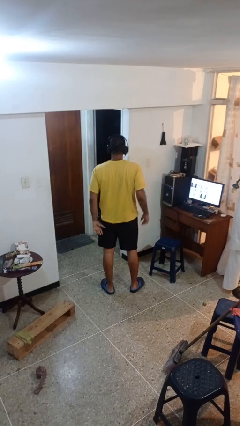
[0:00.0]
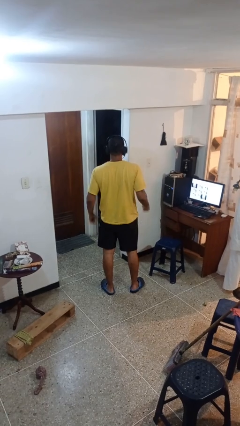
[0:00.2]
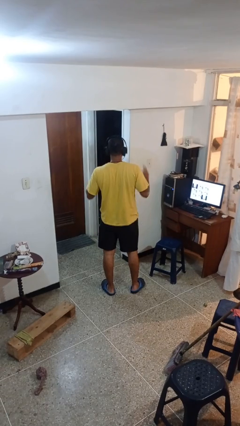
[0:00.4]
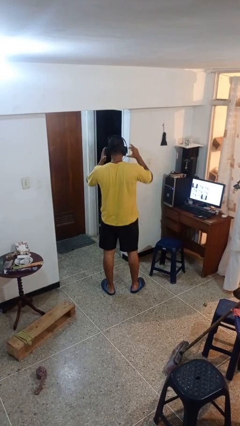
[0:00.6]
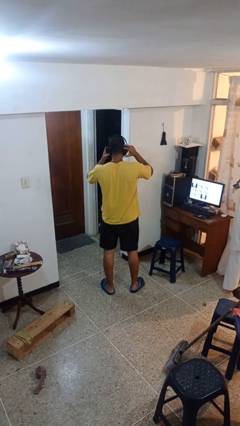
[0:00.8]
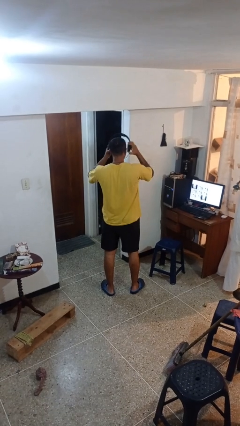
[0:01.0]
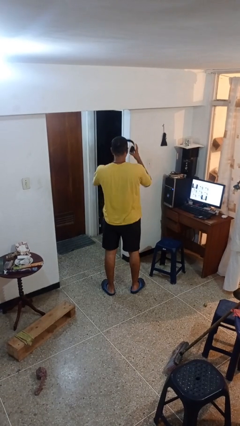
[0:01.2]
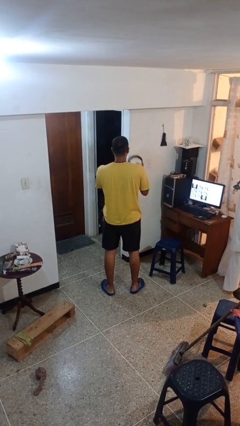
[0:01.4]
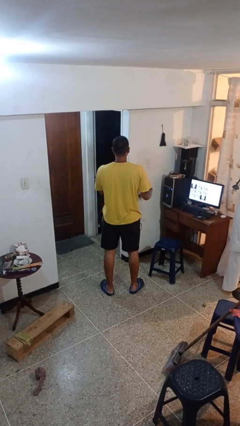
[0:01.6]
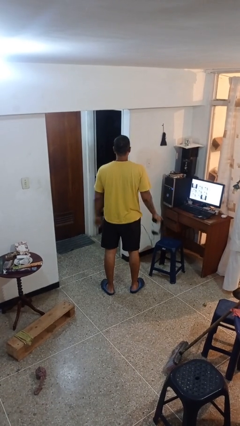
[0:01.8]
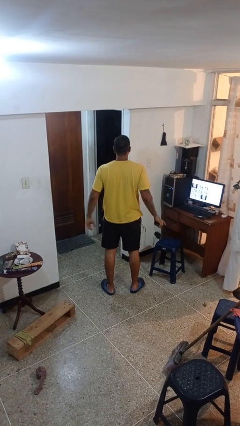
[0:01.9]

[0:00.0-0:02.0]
person takes off headphones

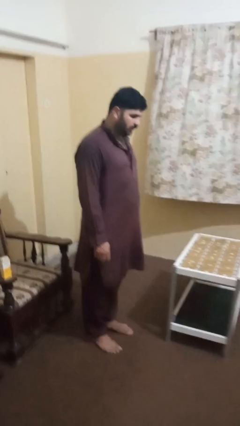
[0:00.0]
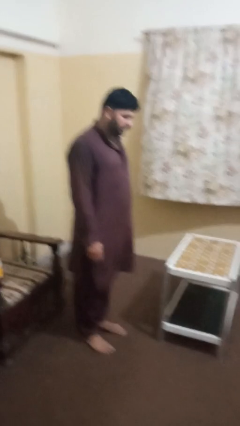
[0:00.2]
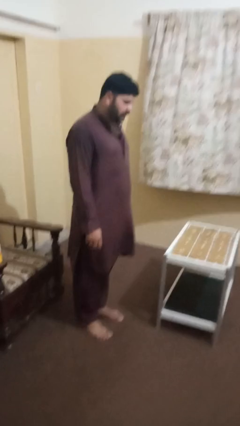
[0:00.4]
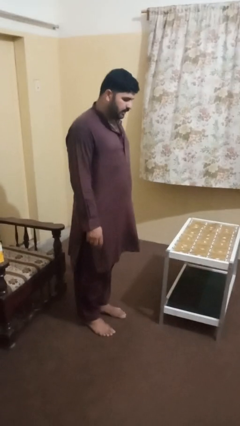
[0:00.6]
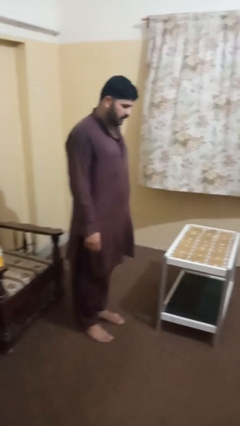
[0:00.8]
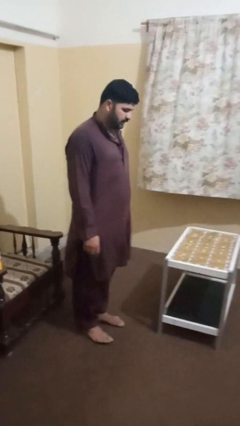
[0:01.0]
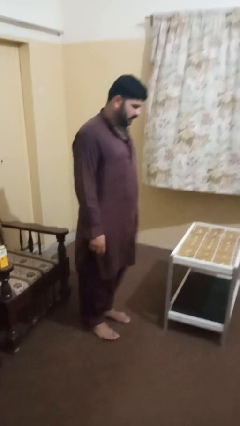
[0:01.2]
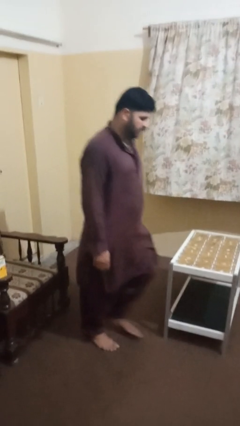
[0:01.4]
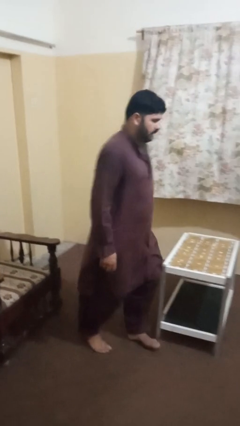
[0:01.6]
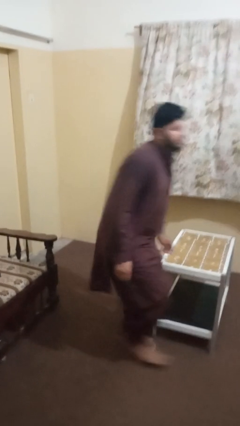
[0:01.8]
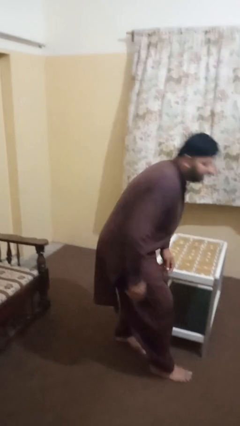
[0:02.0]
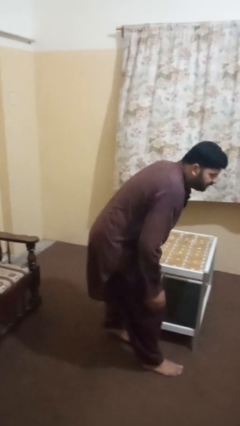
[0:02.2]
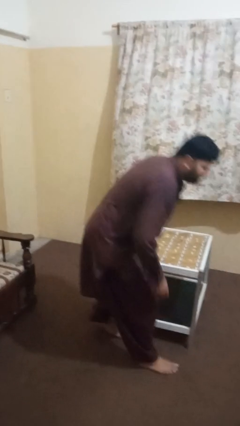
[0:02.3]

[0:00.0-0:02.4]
person bumps into table

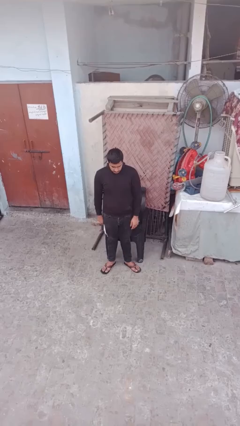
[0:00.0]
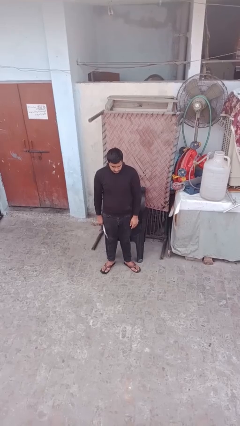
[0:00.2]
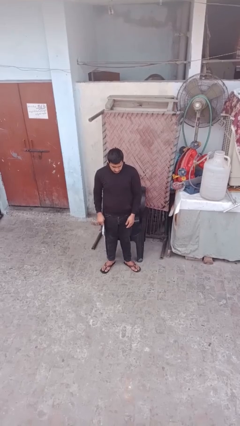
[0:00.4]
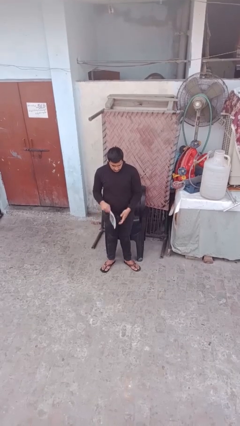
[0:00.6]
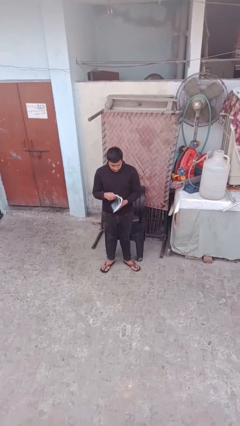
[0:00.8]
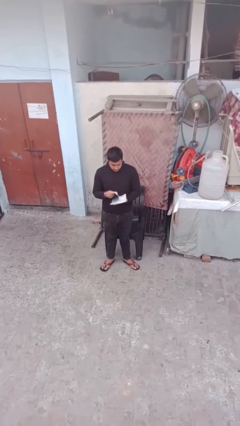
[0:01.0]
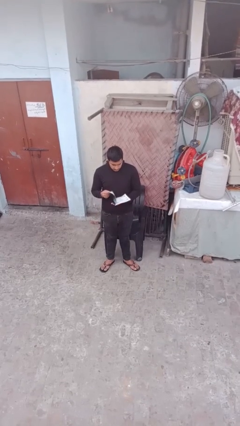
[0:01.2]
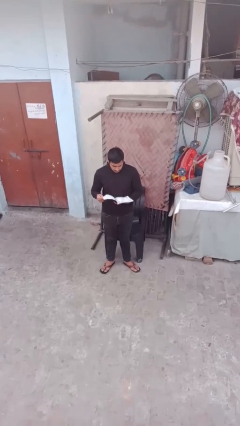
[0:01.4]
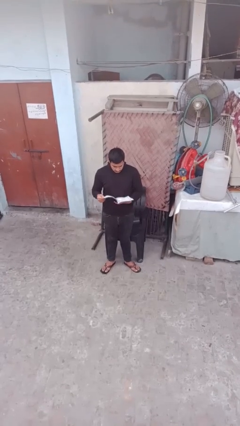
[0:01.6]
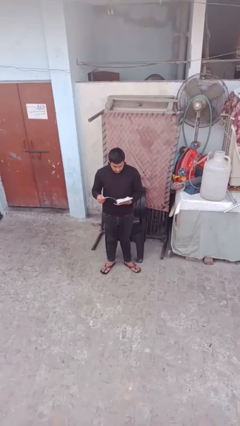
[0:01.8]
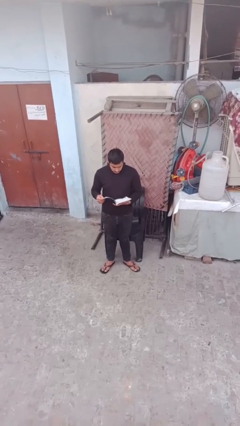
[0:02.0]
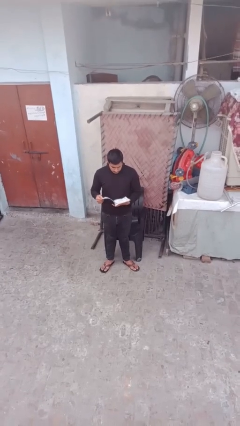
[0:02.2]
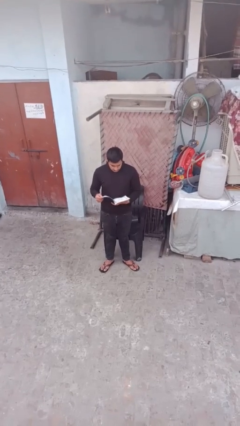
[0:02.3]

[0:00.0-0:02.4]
person reads document

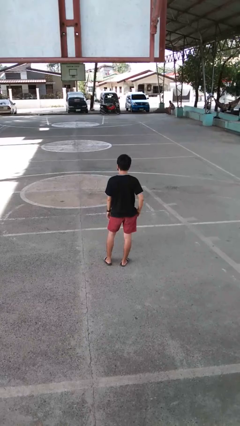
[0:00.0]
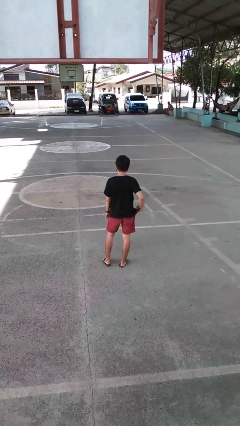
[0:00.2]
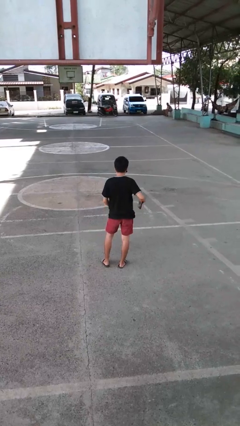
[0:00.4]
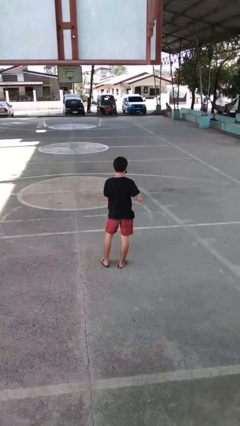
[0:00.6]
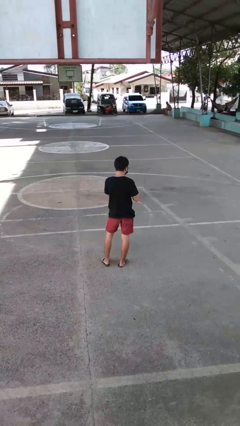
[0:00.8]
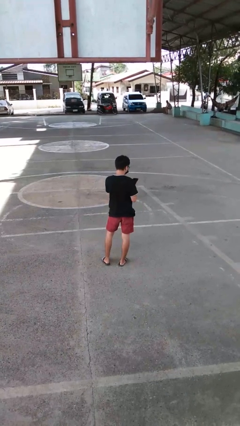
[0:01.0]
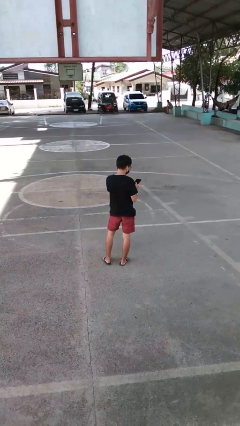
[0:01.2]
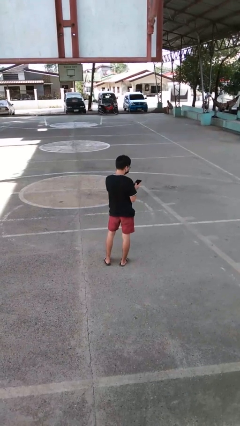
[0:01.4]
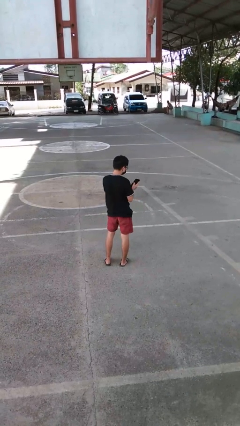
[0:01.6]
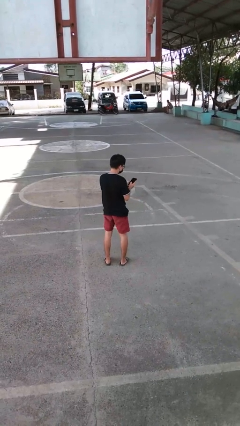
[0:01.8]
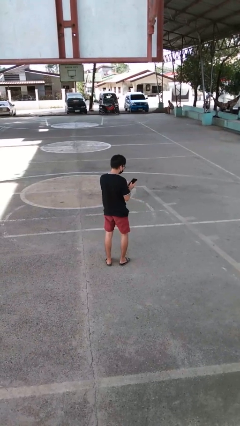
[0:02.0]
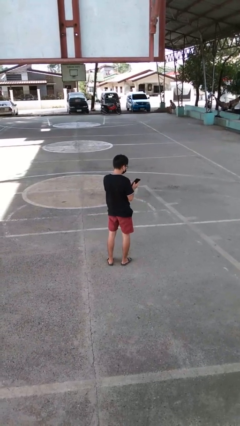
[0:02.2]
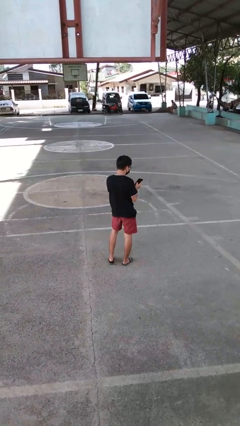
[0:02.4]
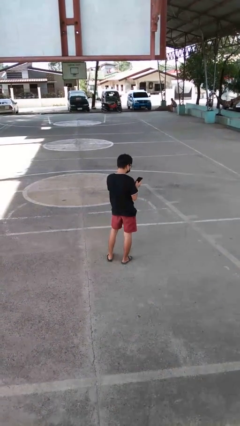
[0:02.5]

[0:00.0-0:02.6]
person takes phone from pocket

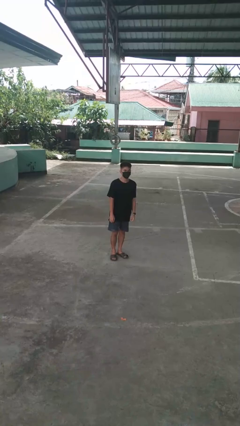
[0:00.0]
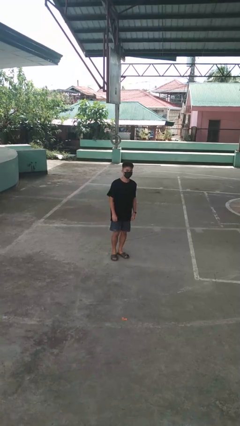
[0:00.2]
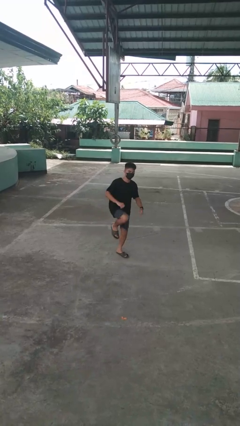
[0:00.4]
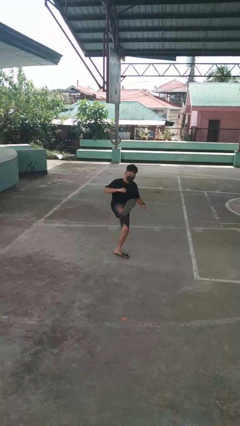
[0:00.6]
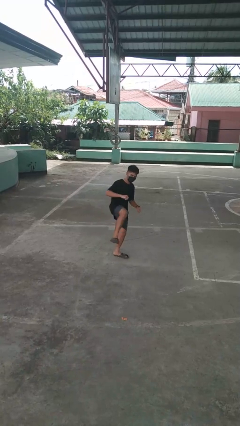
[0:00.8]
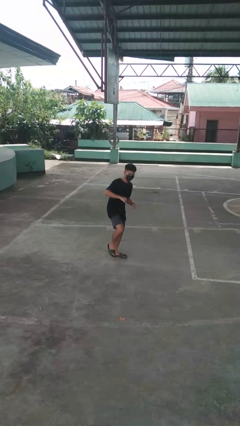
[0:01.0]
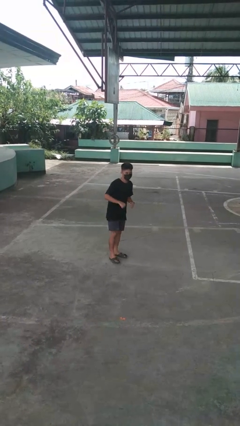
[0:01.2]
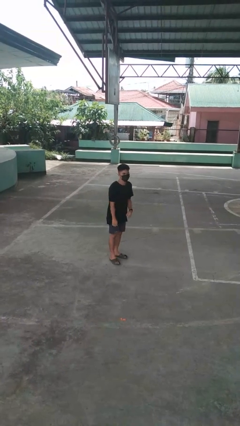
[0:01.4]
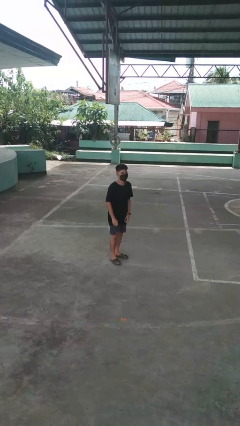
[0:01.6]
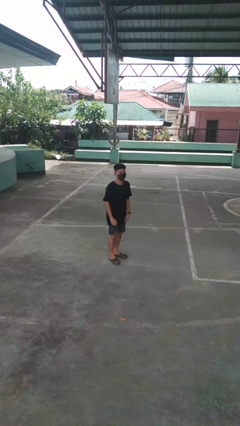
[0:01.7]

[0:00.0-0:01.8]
person karate kicks

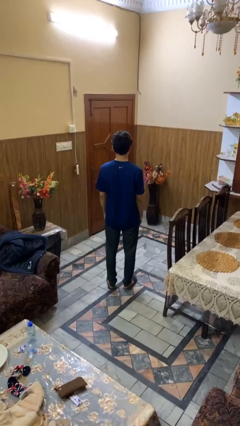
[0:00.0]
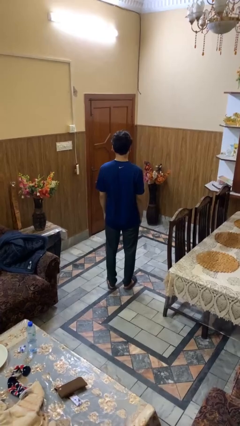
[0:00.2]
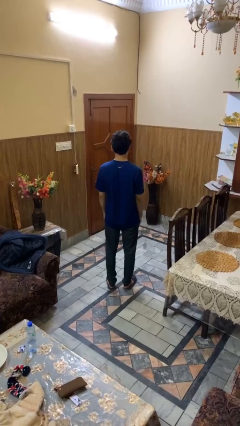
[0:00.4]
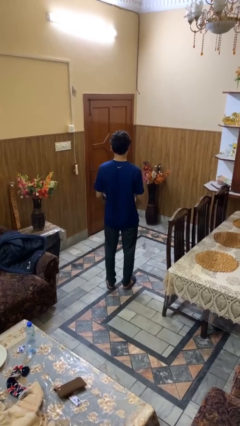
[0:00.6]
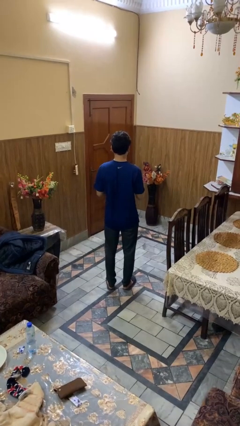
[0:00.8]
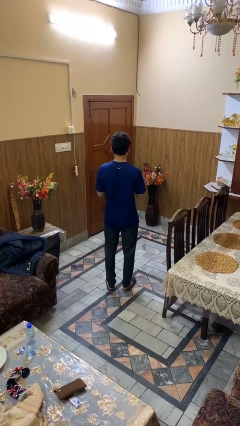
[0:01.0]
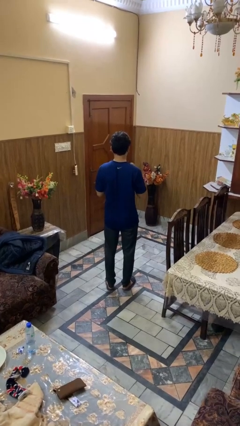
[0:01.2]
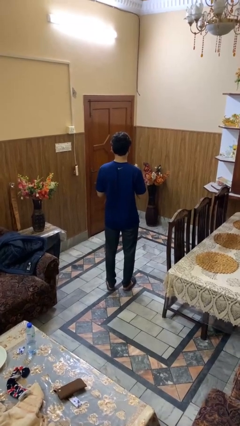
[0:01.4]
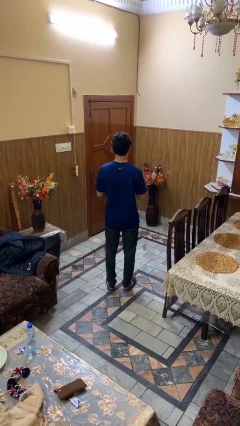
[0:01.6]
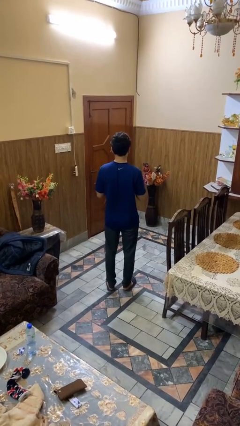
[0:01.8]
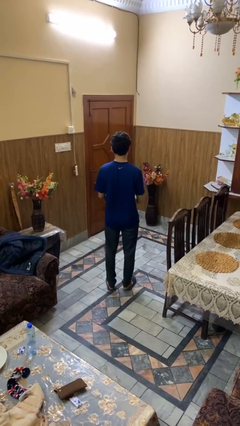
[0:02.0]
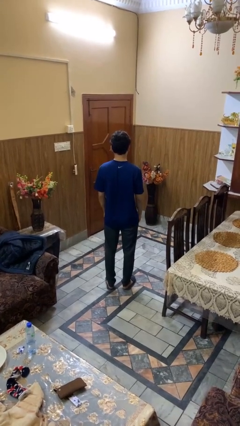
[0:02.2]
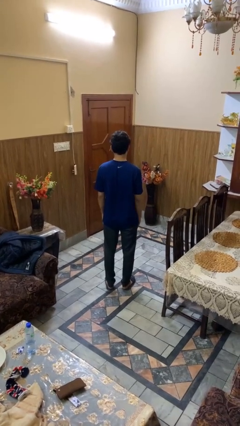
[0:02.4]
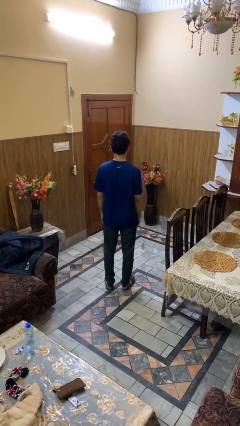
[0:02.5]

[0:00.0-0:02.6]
person drums on chest

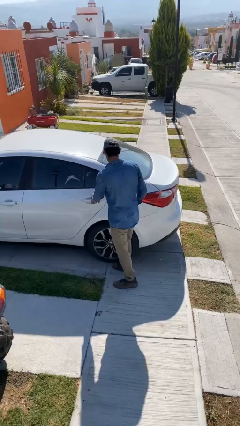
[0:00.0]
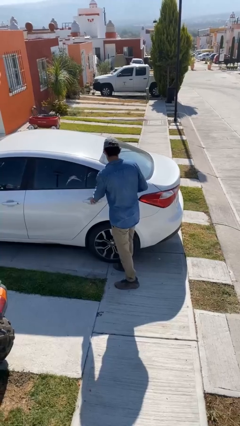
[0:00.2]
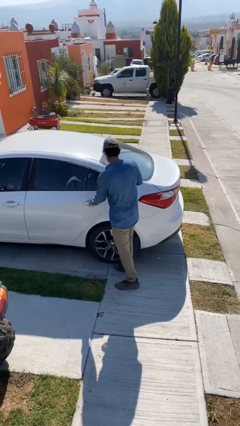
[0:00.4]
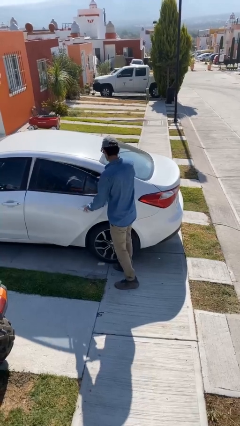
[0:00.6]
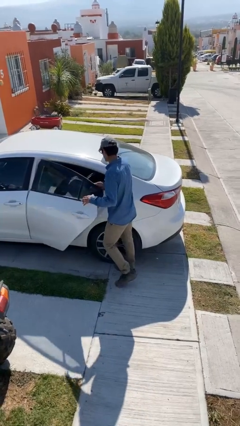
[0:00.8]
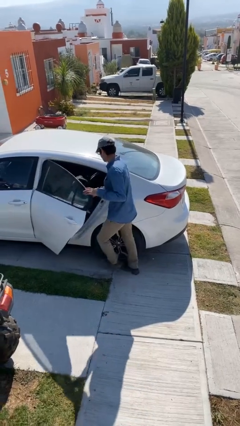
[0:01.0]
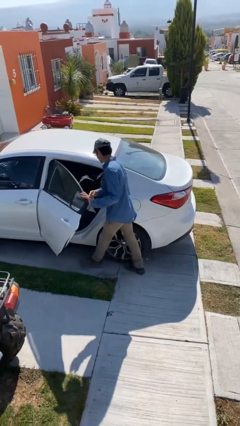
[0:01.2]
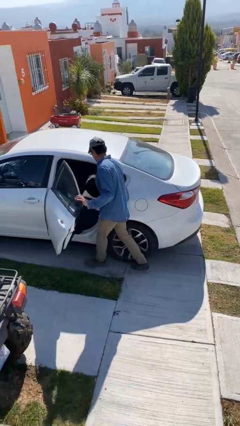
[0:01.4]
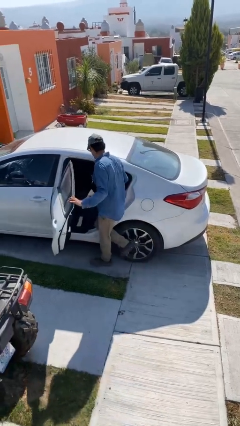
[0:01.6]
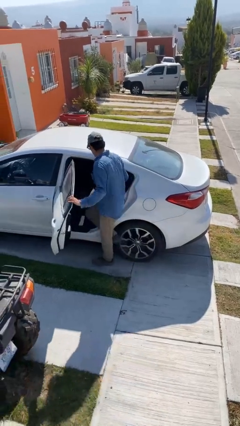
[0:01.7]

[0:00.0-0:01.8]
person opens car door

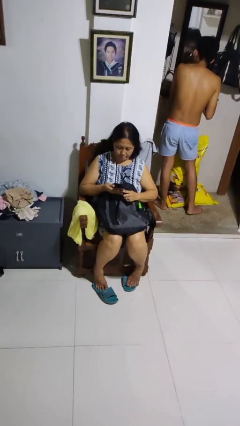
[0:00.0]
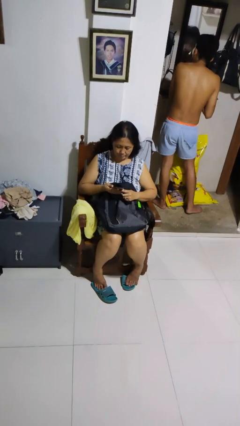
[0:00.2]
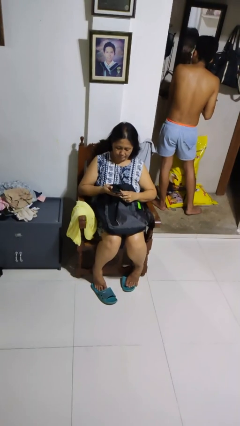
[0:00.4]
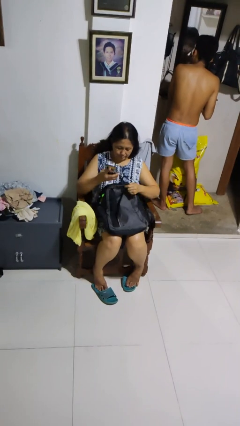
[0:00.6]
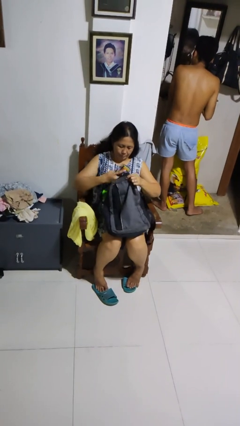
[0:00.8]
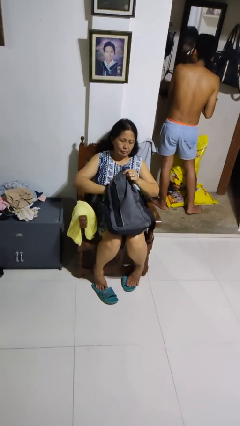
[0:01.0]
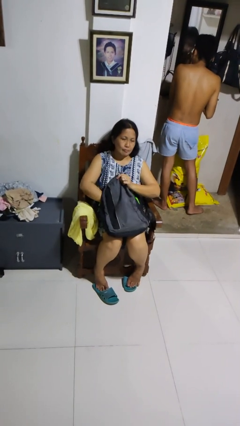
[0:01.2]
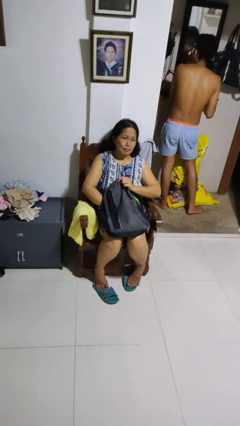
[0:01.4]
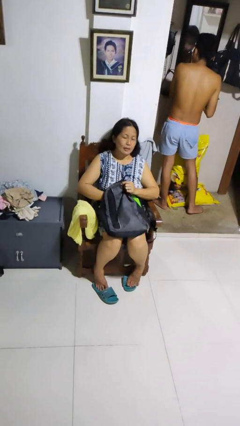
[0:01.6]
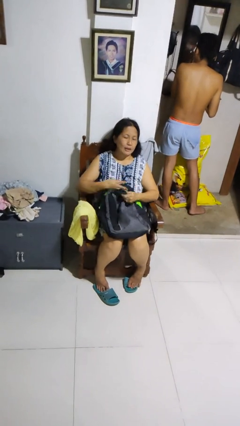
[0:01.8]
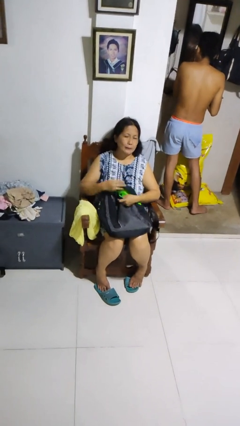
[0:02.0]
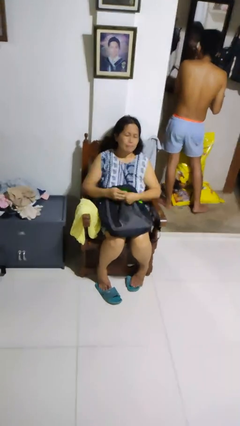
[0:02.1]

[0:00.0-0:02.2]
person puts object into backpack
